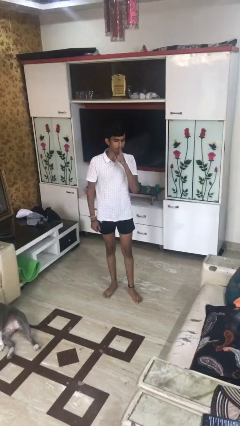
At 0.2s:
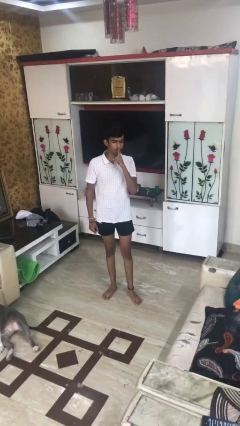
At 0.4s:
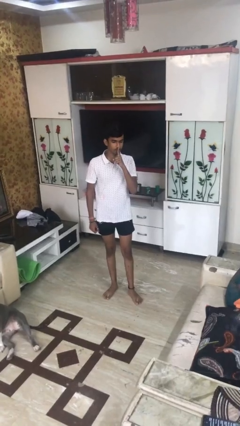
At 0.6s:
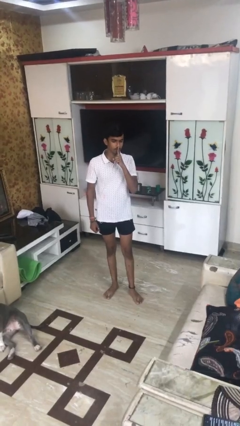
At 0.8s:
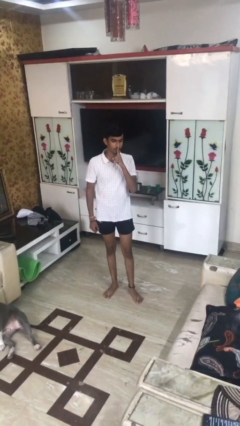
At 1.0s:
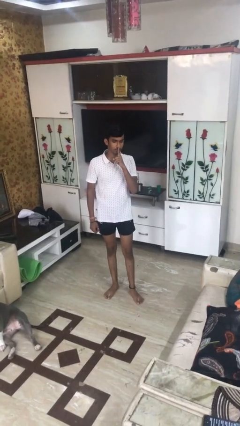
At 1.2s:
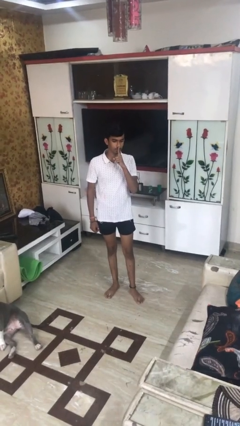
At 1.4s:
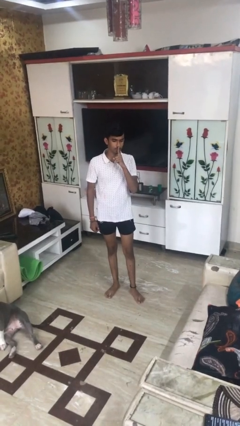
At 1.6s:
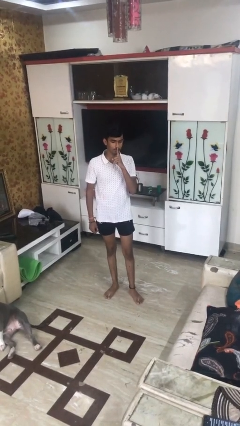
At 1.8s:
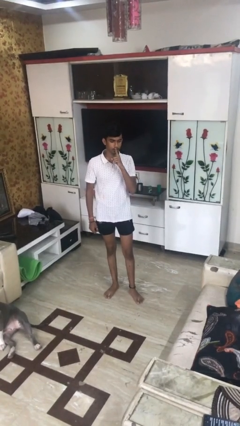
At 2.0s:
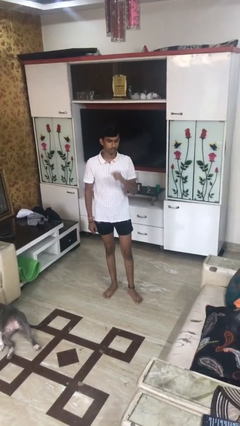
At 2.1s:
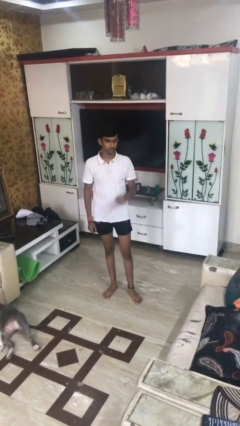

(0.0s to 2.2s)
person gestures be quiet

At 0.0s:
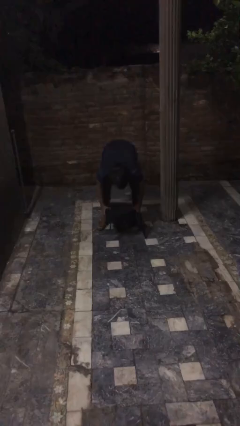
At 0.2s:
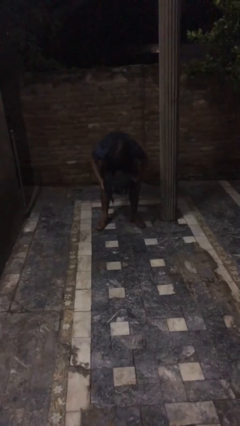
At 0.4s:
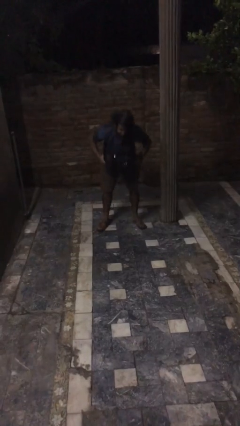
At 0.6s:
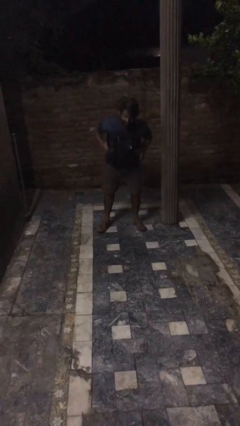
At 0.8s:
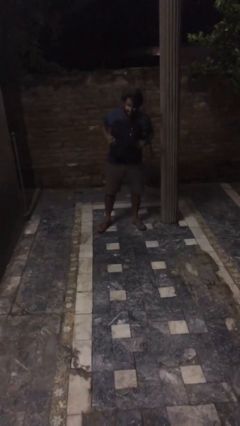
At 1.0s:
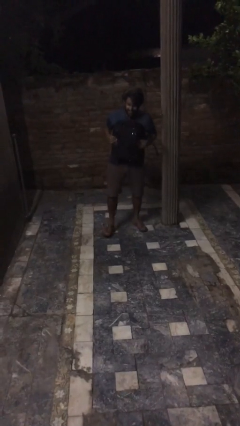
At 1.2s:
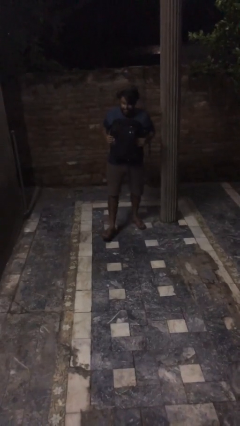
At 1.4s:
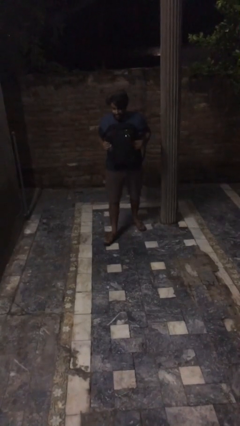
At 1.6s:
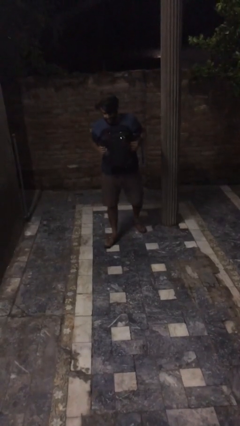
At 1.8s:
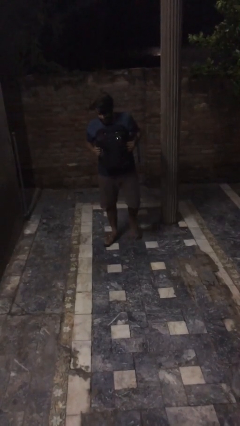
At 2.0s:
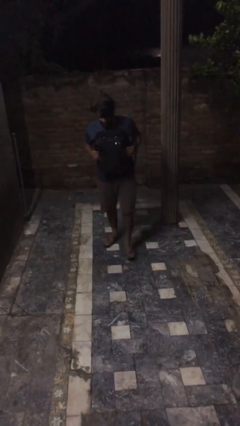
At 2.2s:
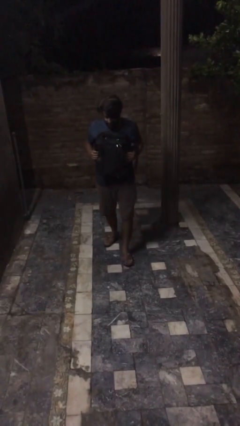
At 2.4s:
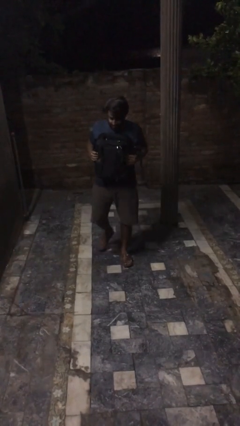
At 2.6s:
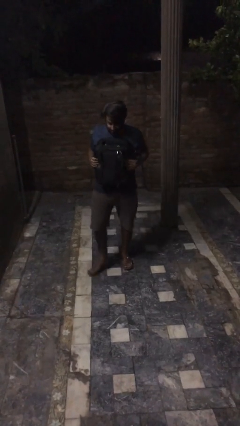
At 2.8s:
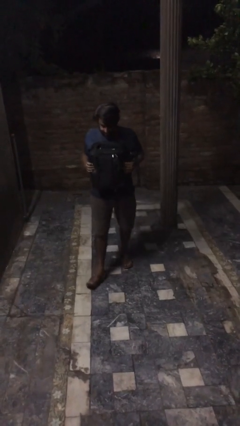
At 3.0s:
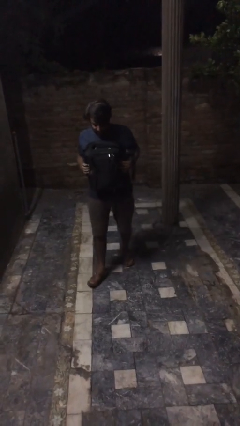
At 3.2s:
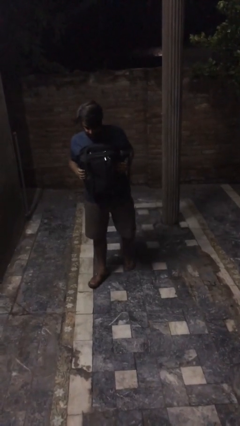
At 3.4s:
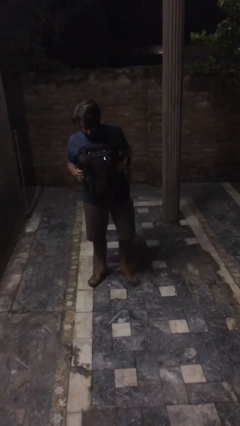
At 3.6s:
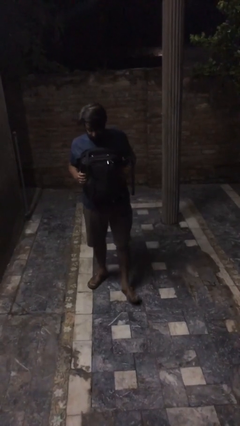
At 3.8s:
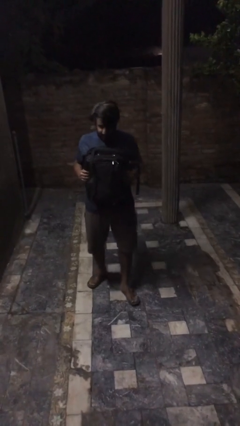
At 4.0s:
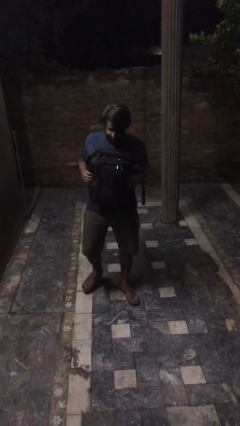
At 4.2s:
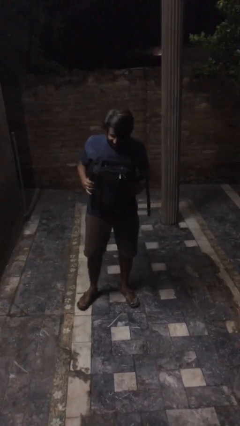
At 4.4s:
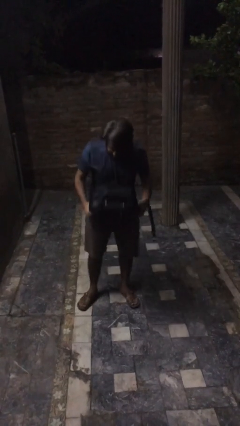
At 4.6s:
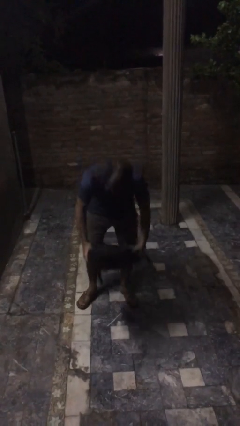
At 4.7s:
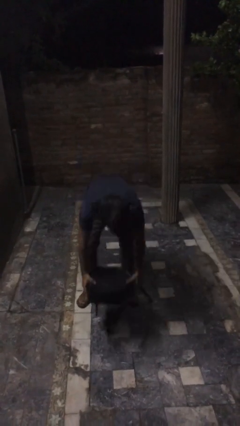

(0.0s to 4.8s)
person carries heavy object

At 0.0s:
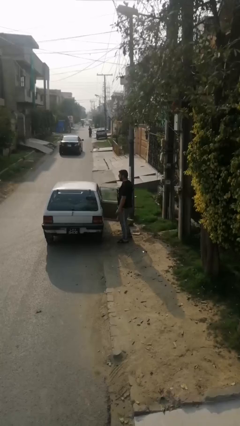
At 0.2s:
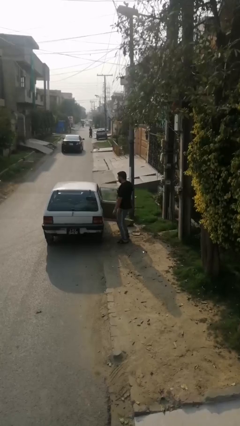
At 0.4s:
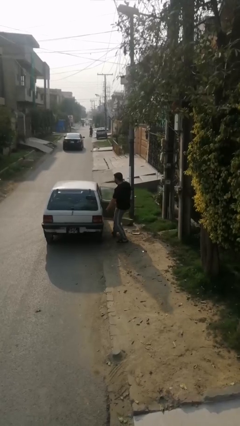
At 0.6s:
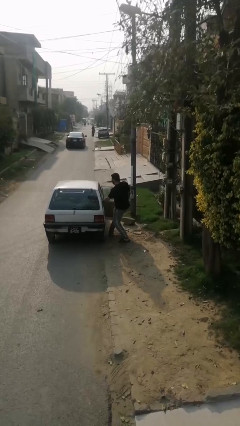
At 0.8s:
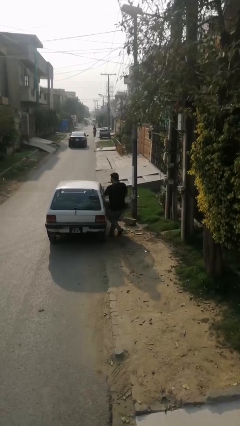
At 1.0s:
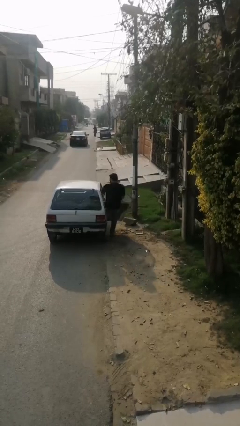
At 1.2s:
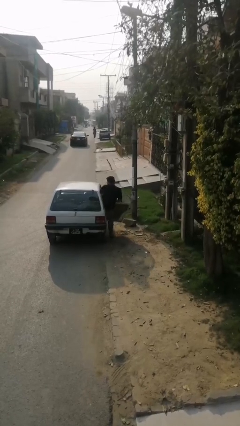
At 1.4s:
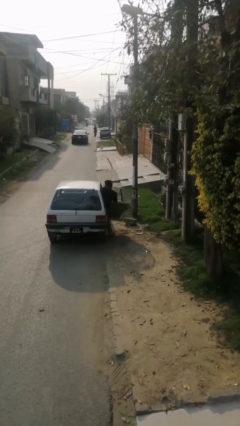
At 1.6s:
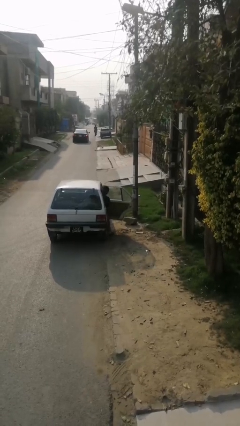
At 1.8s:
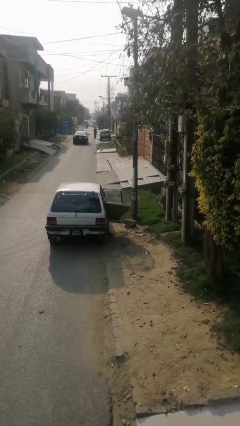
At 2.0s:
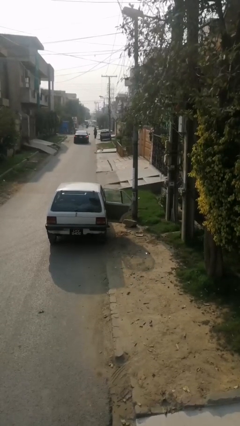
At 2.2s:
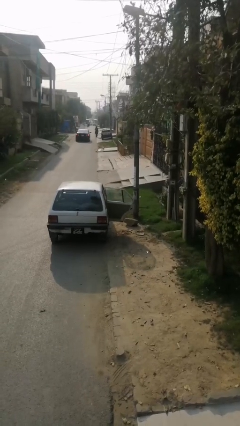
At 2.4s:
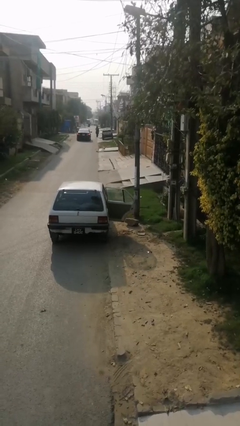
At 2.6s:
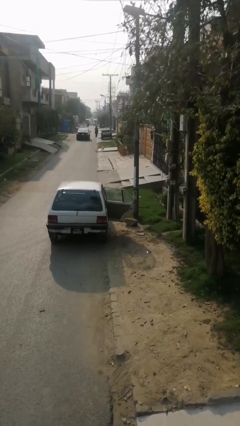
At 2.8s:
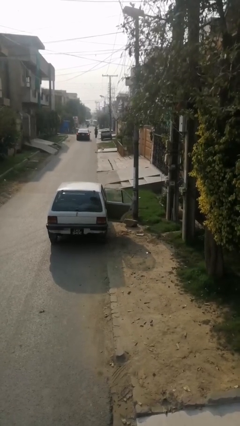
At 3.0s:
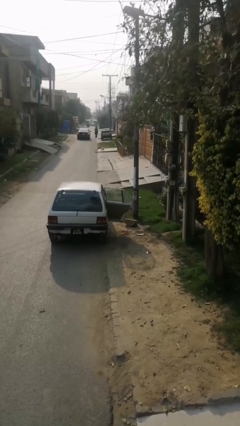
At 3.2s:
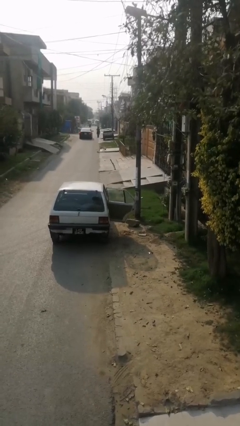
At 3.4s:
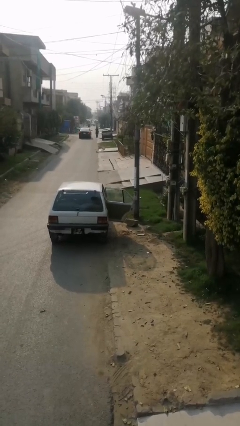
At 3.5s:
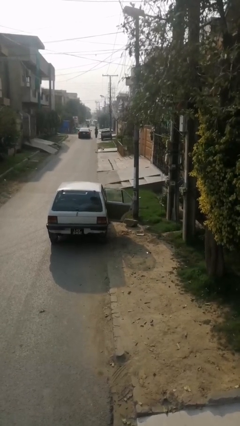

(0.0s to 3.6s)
person enters car

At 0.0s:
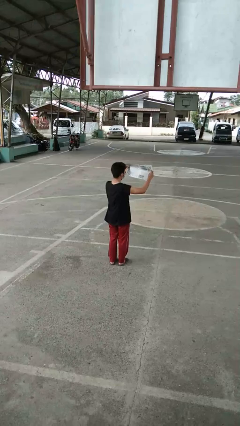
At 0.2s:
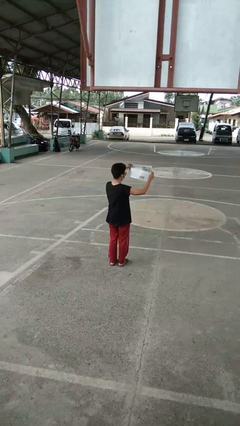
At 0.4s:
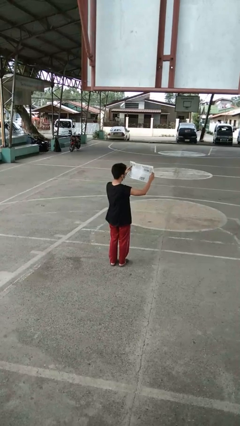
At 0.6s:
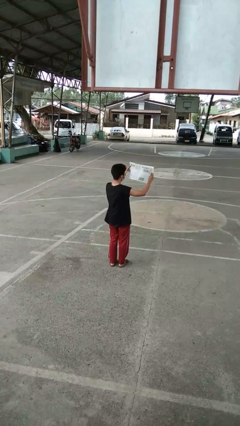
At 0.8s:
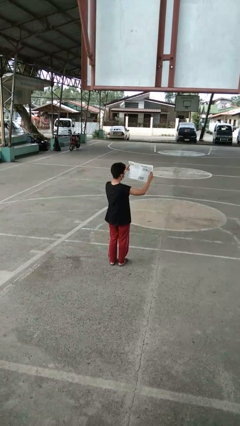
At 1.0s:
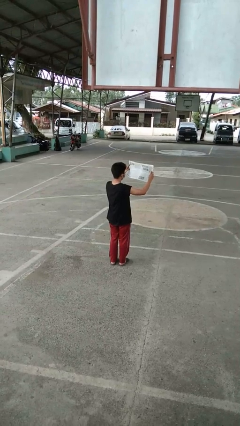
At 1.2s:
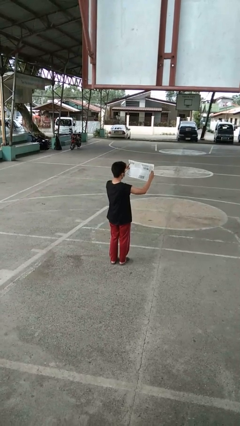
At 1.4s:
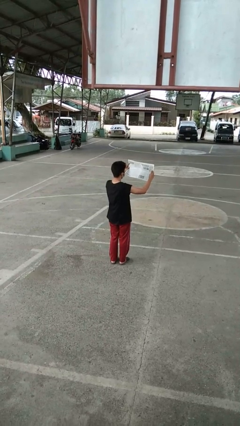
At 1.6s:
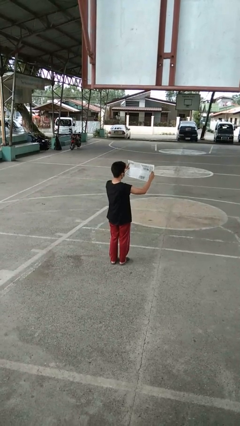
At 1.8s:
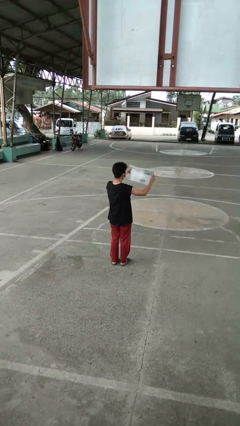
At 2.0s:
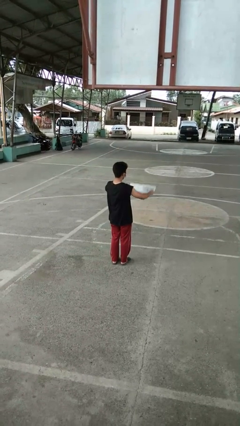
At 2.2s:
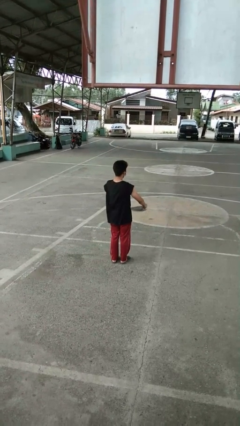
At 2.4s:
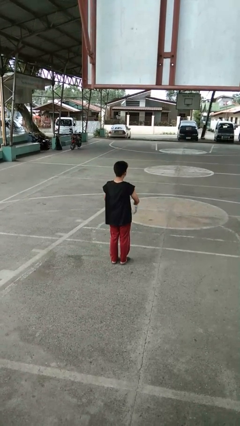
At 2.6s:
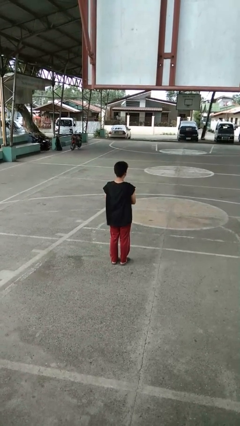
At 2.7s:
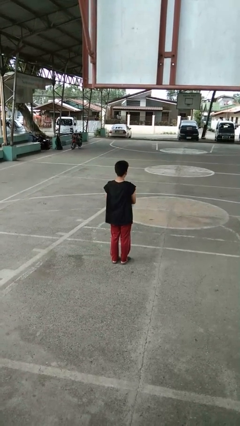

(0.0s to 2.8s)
person reads newspaper

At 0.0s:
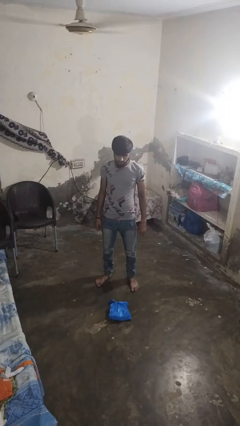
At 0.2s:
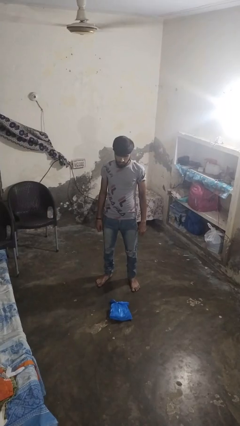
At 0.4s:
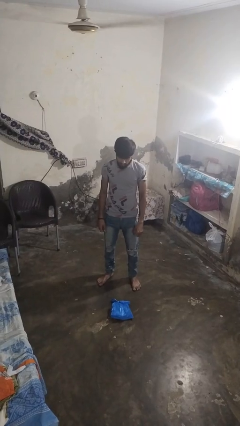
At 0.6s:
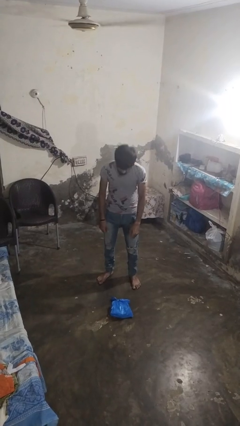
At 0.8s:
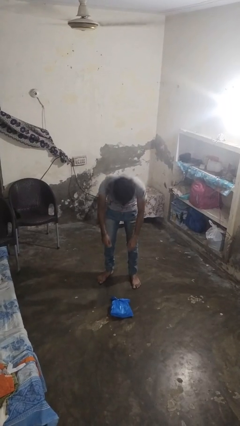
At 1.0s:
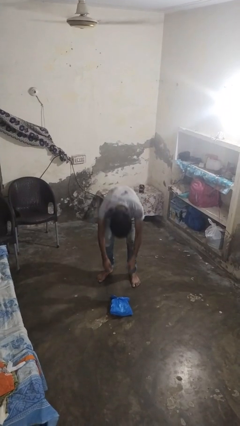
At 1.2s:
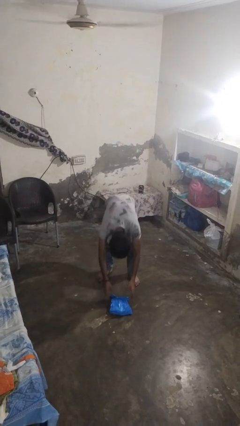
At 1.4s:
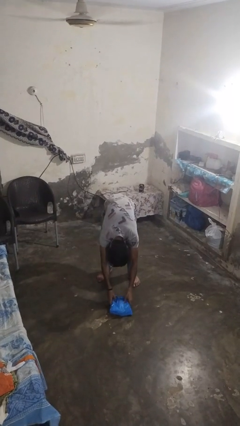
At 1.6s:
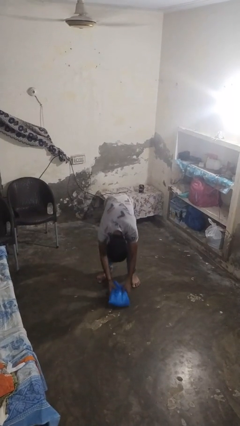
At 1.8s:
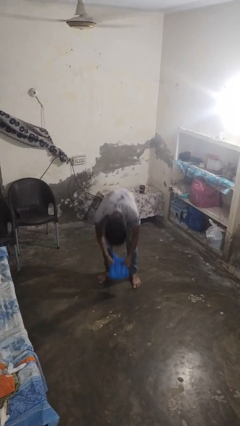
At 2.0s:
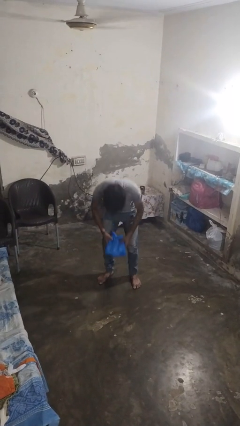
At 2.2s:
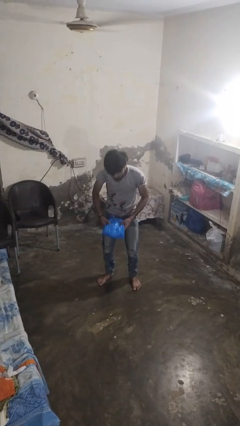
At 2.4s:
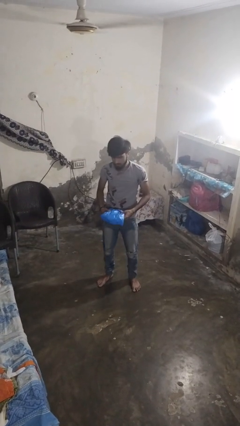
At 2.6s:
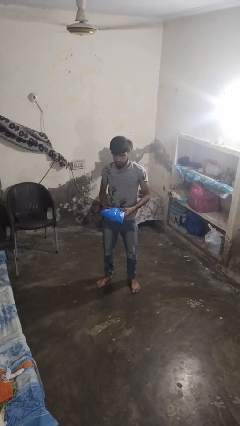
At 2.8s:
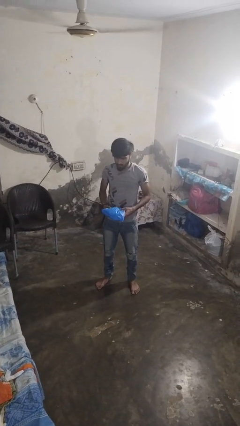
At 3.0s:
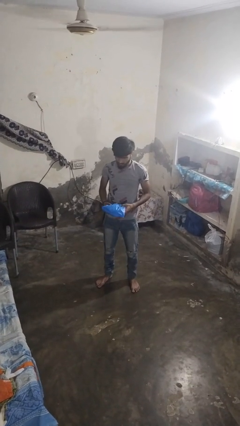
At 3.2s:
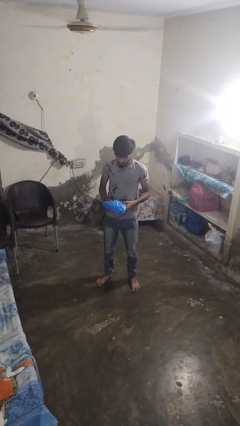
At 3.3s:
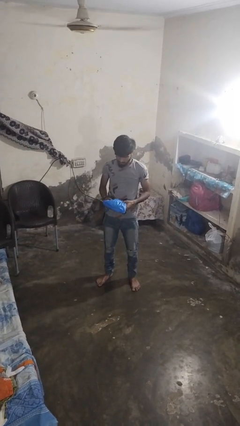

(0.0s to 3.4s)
person picks up object from floor

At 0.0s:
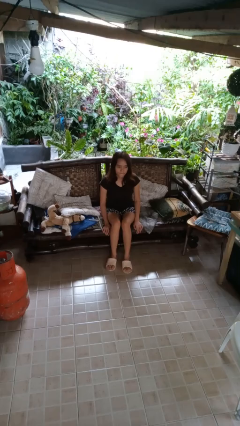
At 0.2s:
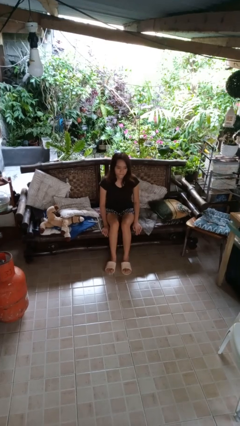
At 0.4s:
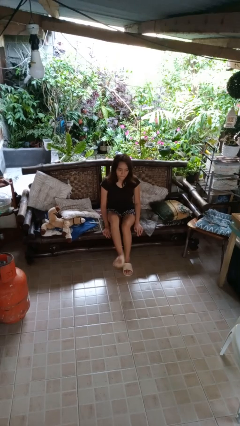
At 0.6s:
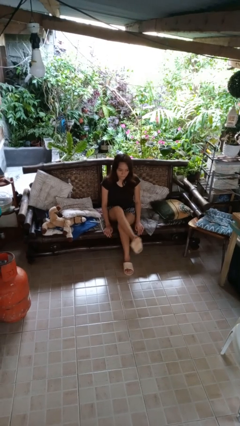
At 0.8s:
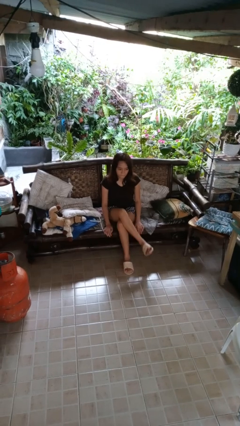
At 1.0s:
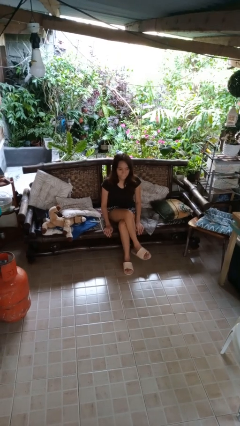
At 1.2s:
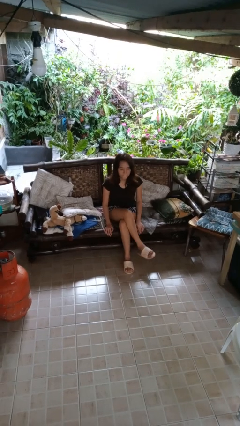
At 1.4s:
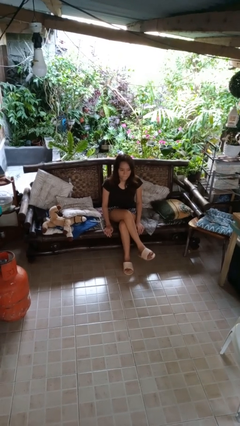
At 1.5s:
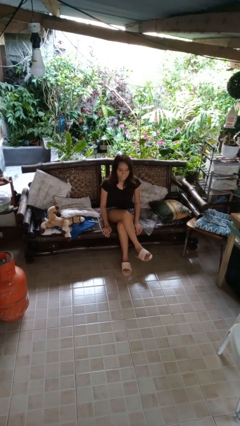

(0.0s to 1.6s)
person crosses legs
